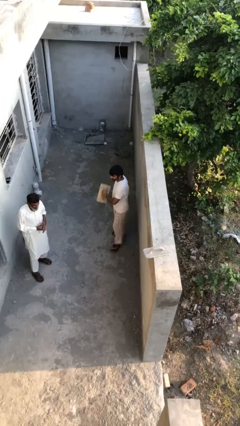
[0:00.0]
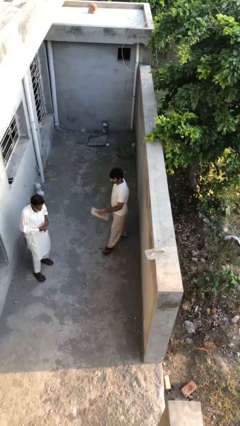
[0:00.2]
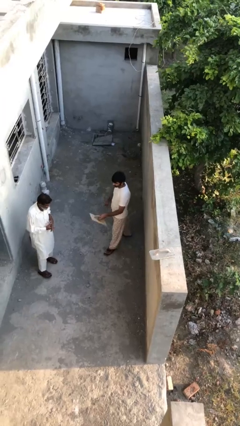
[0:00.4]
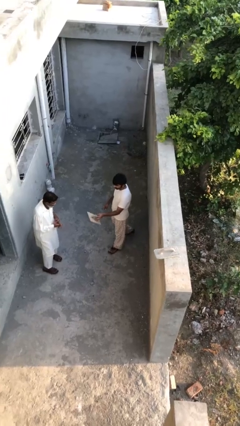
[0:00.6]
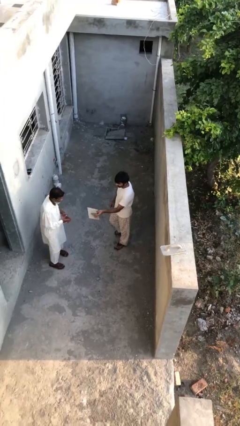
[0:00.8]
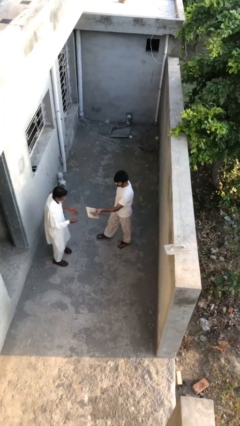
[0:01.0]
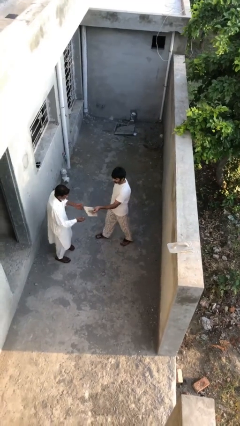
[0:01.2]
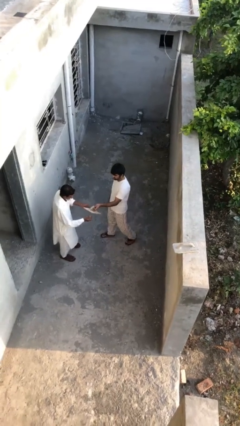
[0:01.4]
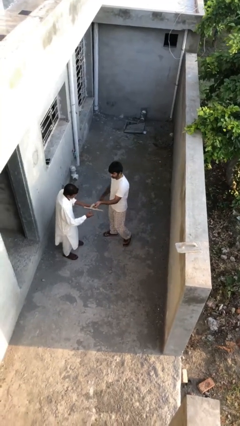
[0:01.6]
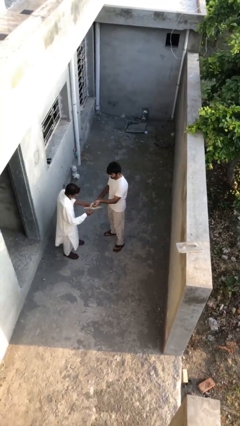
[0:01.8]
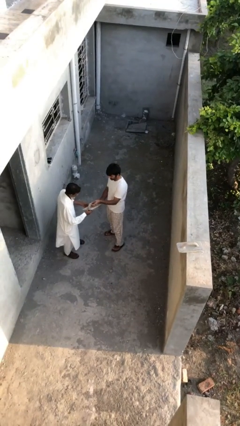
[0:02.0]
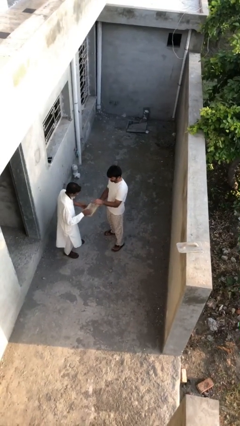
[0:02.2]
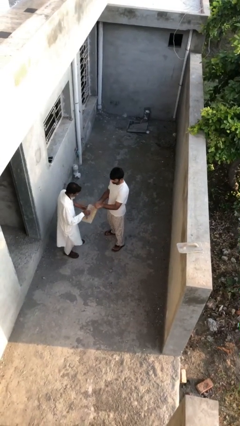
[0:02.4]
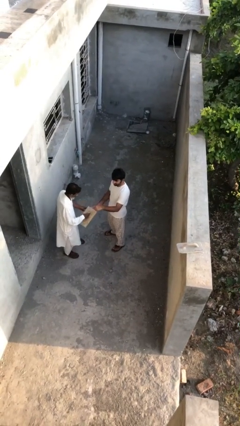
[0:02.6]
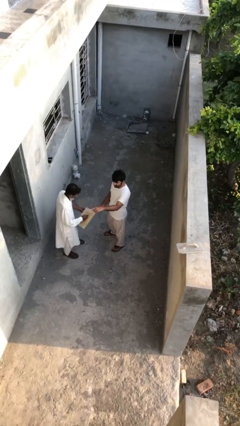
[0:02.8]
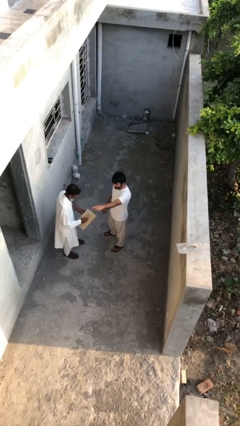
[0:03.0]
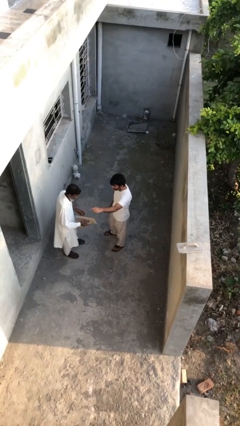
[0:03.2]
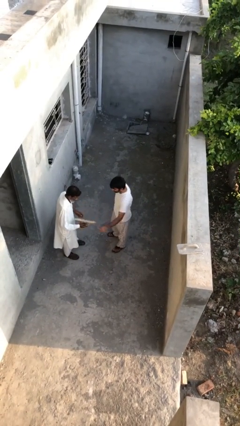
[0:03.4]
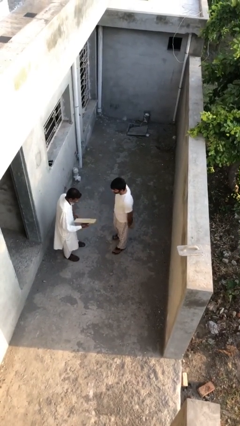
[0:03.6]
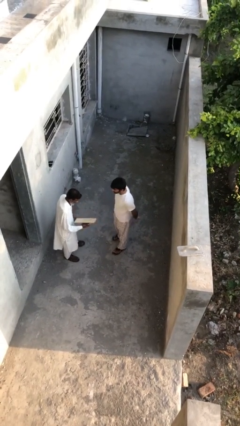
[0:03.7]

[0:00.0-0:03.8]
person transfers object to person

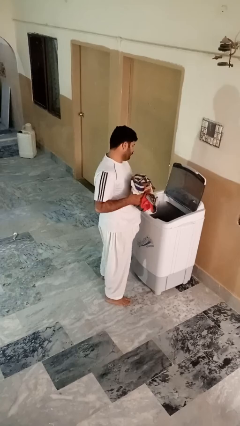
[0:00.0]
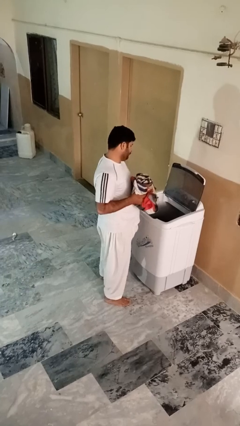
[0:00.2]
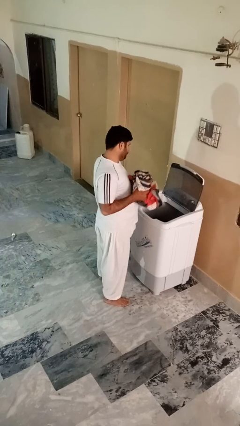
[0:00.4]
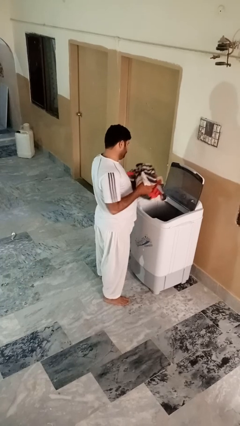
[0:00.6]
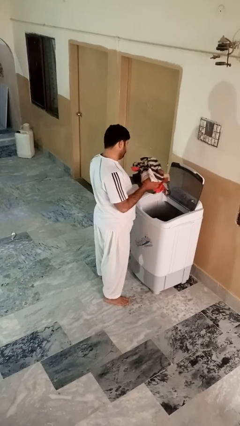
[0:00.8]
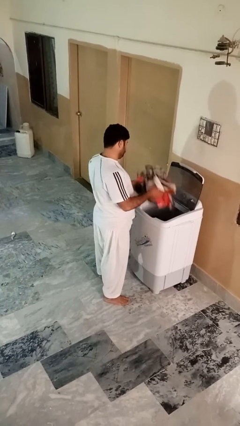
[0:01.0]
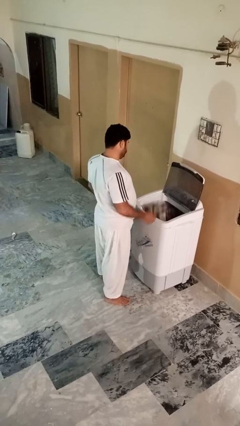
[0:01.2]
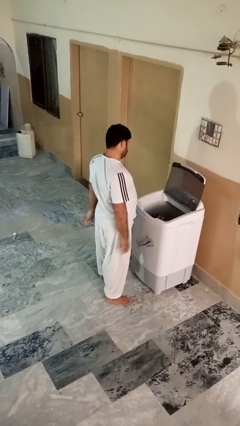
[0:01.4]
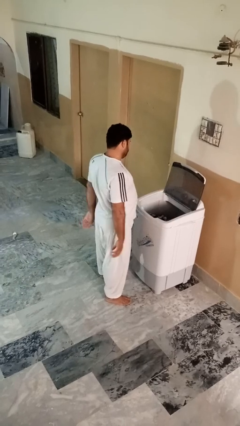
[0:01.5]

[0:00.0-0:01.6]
person loads clotheswasher

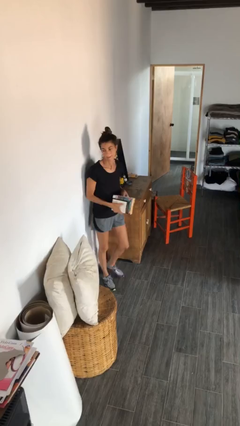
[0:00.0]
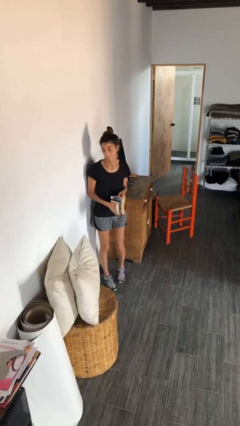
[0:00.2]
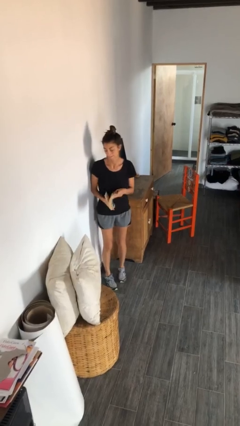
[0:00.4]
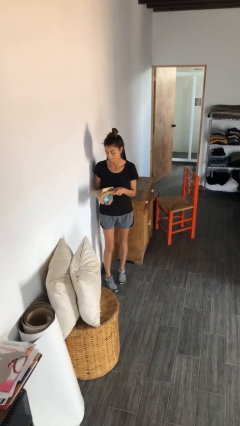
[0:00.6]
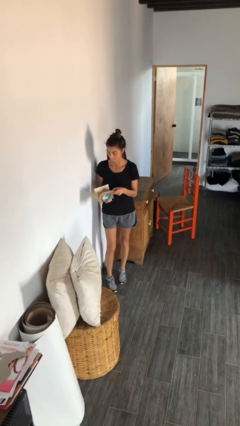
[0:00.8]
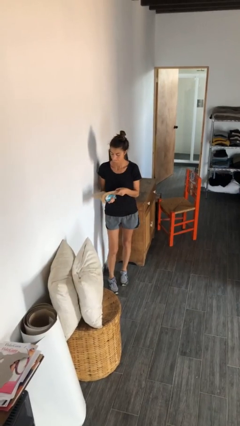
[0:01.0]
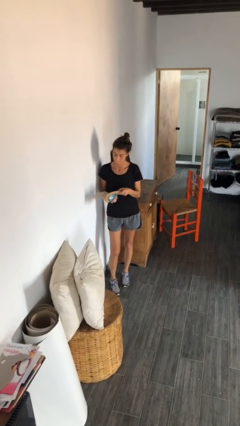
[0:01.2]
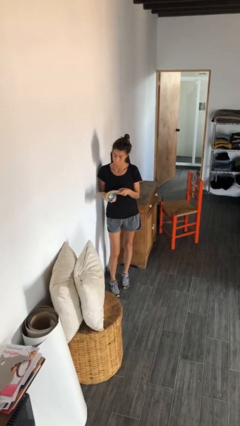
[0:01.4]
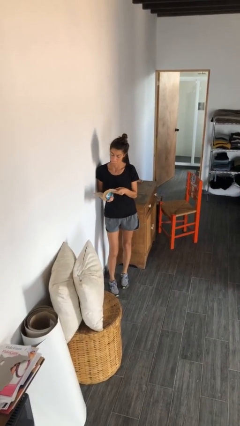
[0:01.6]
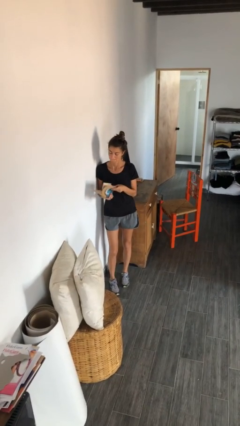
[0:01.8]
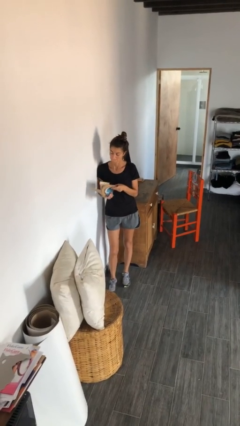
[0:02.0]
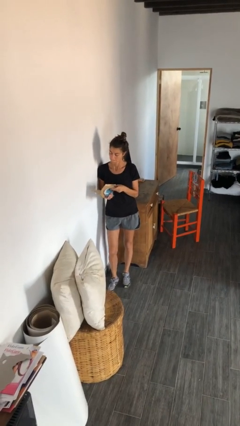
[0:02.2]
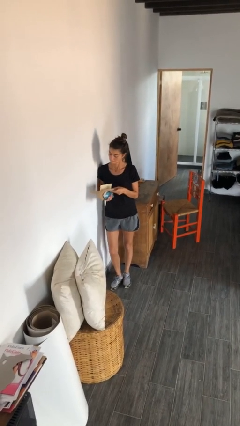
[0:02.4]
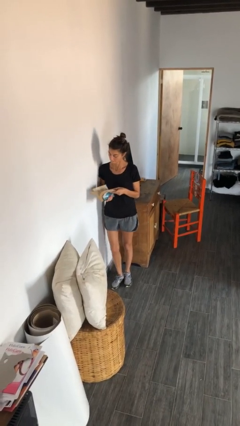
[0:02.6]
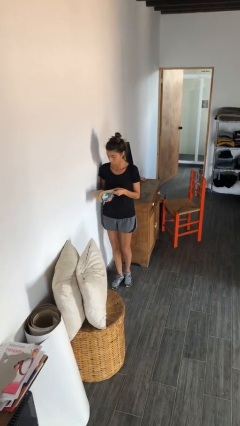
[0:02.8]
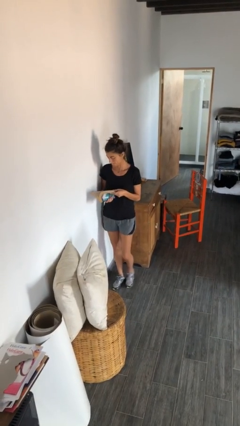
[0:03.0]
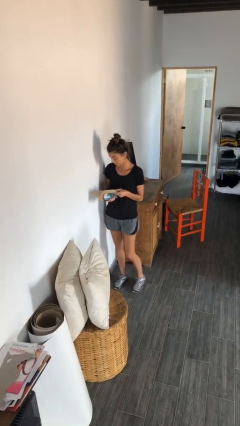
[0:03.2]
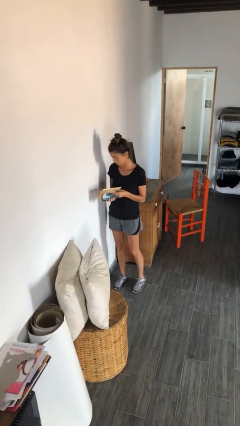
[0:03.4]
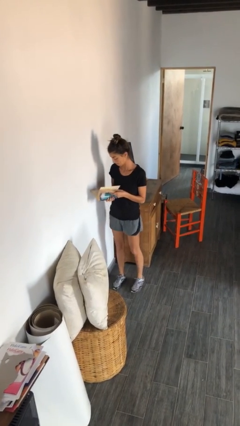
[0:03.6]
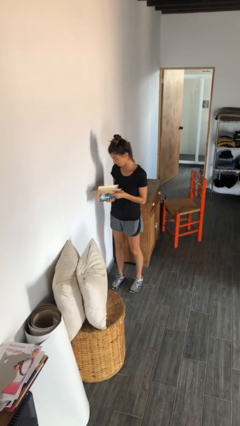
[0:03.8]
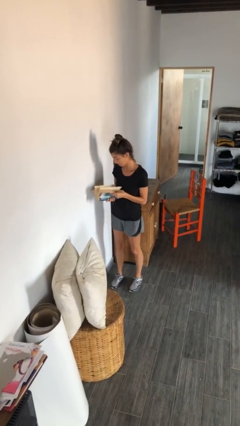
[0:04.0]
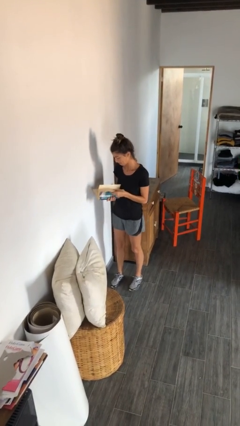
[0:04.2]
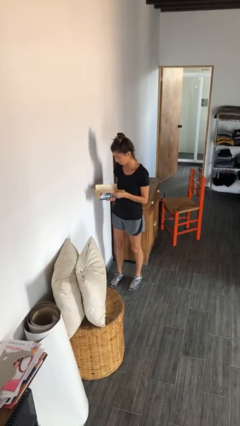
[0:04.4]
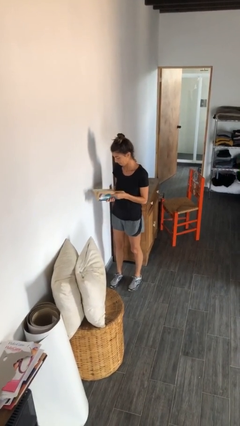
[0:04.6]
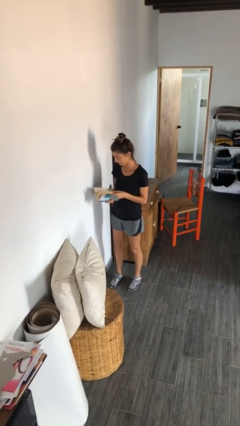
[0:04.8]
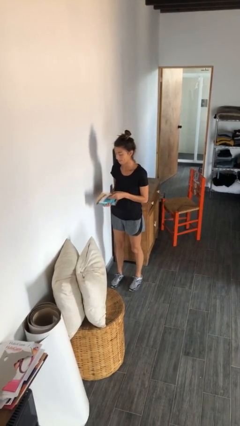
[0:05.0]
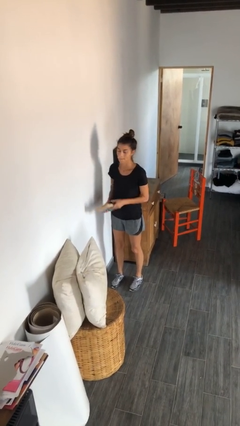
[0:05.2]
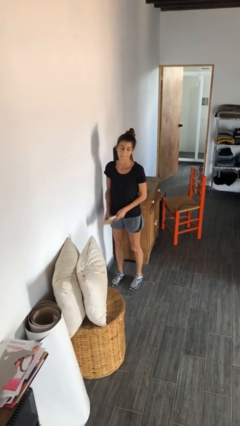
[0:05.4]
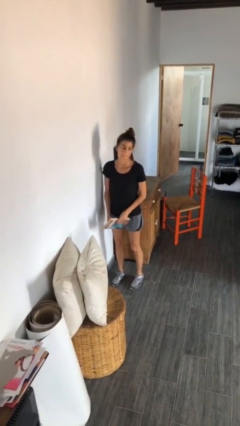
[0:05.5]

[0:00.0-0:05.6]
person reads book

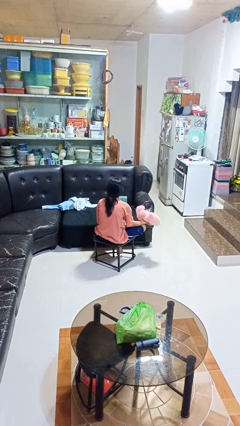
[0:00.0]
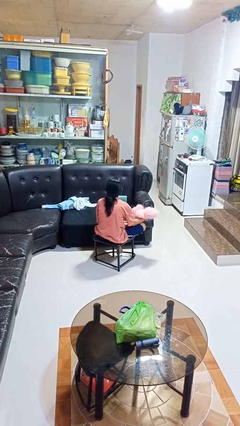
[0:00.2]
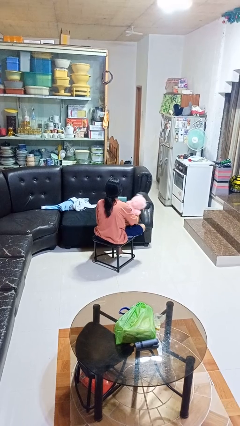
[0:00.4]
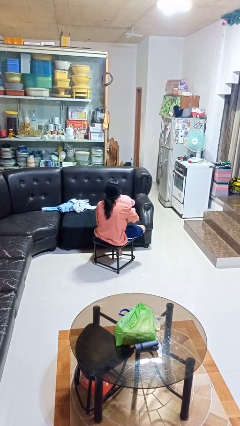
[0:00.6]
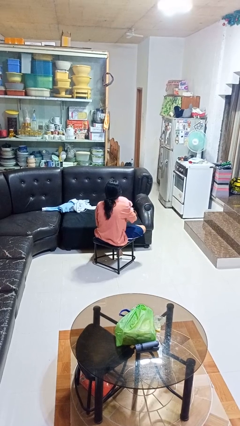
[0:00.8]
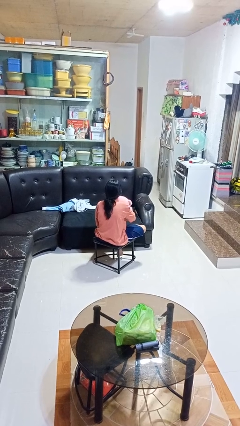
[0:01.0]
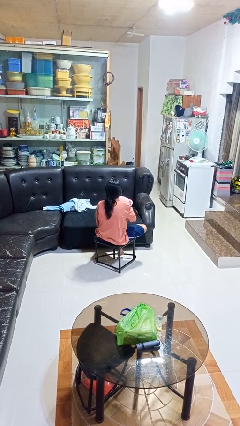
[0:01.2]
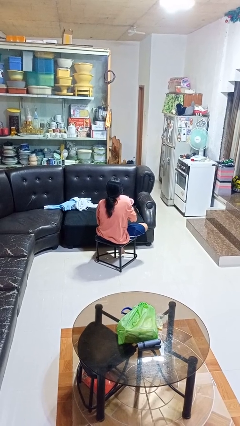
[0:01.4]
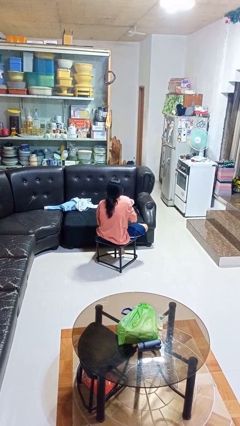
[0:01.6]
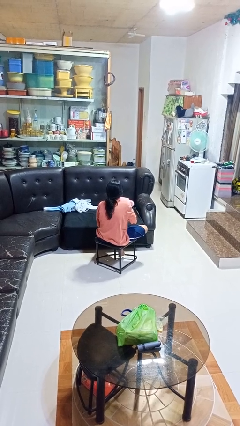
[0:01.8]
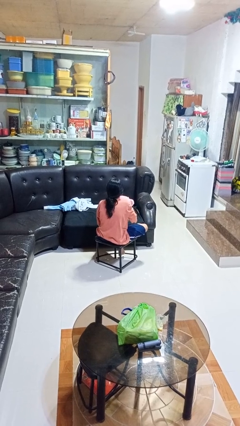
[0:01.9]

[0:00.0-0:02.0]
person hugs stuffed animal

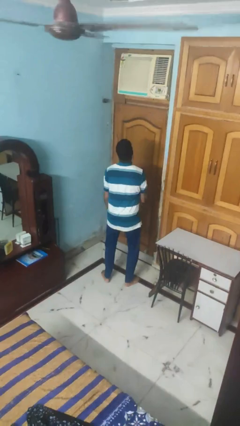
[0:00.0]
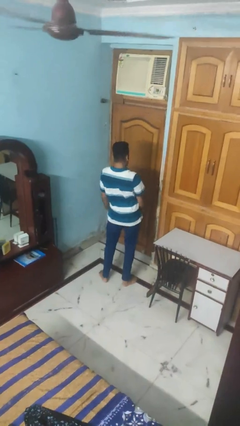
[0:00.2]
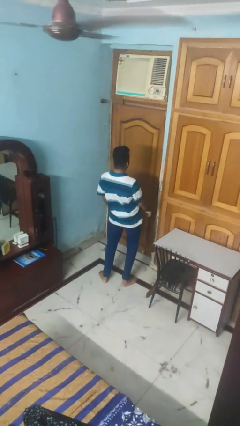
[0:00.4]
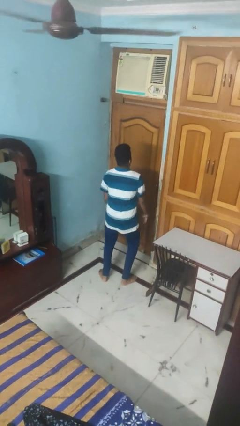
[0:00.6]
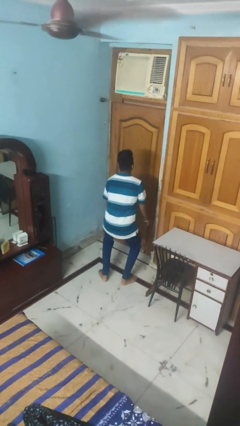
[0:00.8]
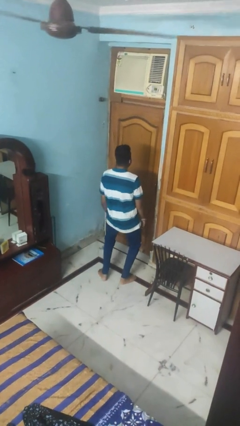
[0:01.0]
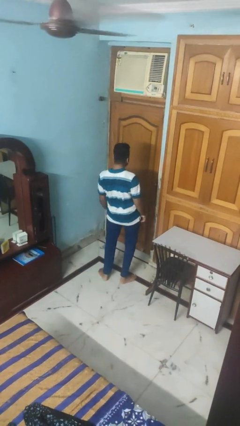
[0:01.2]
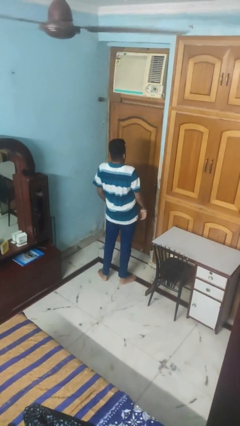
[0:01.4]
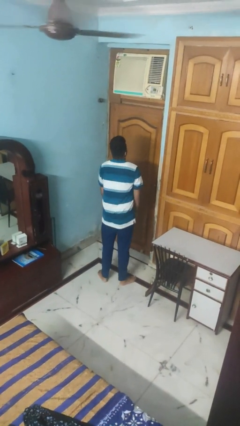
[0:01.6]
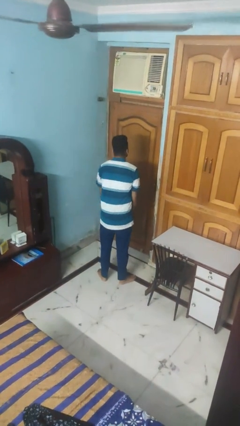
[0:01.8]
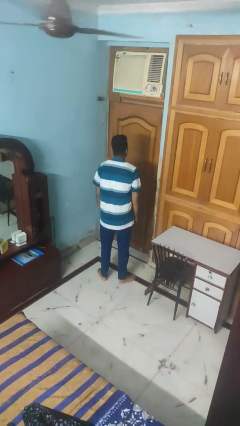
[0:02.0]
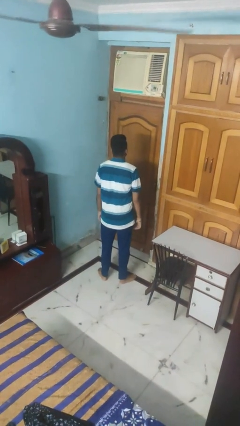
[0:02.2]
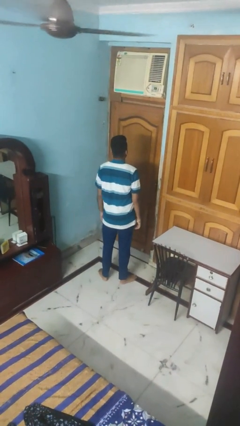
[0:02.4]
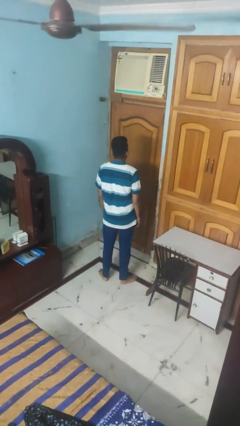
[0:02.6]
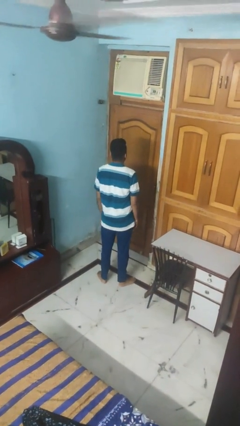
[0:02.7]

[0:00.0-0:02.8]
person dances in place

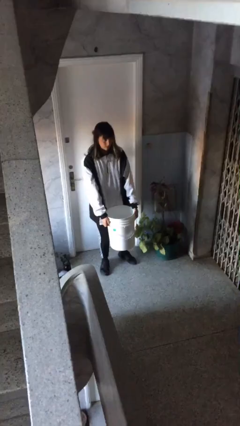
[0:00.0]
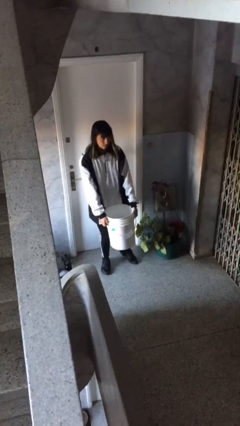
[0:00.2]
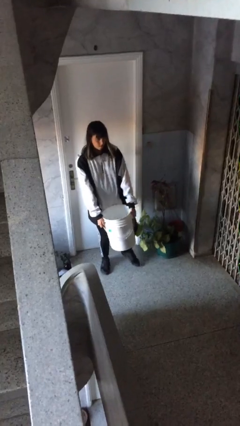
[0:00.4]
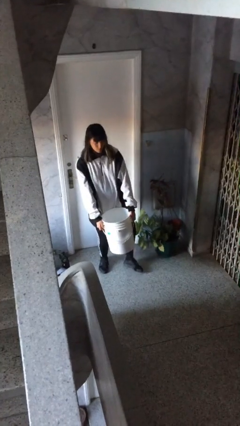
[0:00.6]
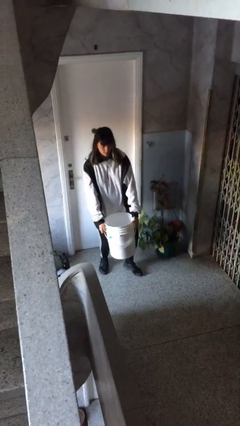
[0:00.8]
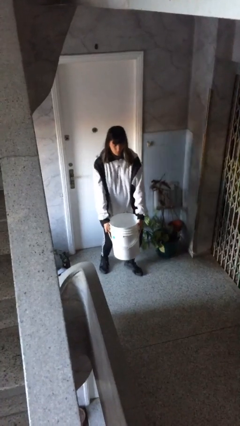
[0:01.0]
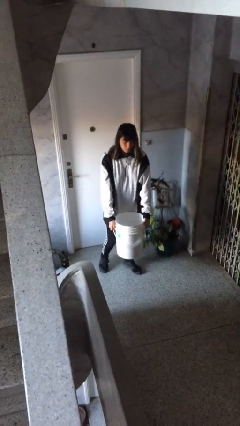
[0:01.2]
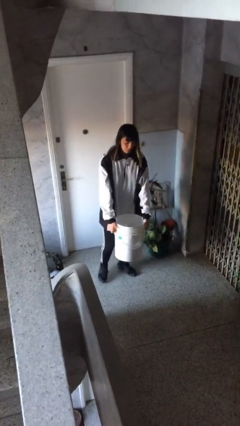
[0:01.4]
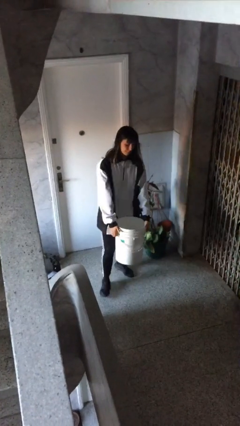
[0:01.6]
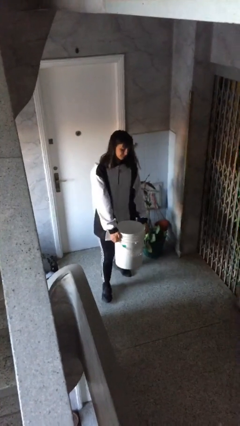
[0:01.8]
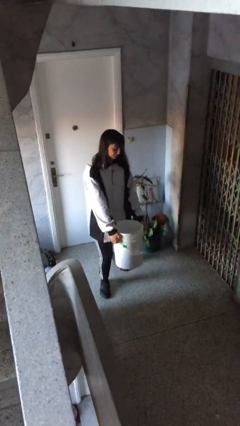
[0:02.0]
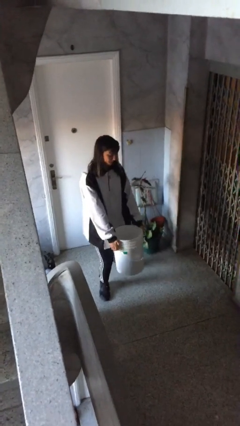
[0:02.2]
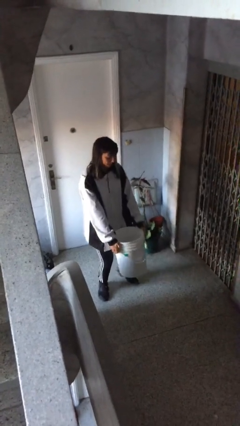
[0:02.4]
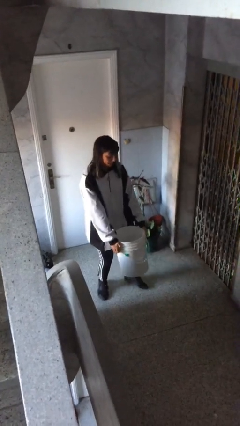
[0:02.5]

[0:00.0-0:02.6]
person carries heavy object
